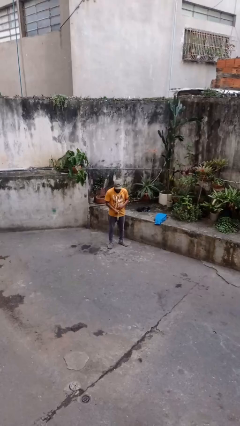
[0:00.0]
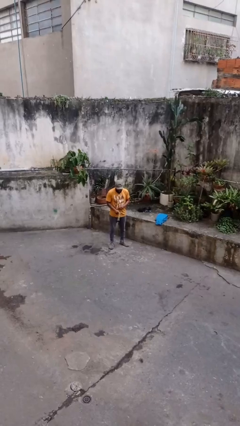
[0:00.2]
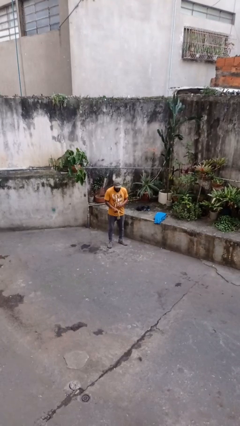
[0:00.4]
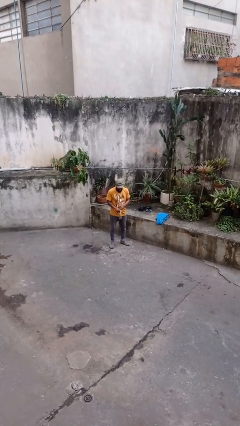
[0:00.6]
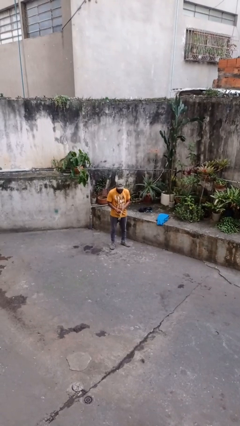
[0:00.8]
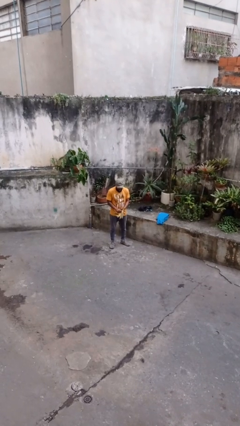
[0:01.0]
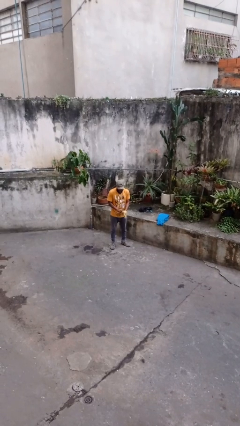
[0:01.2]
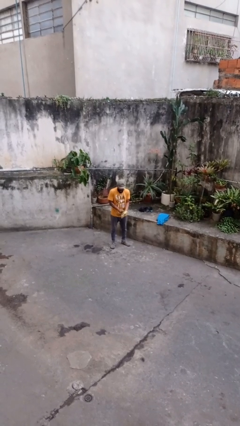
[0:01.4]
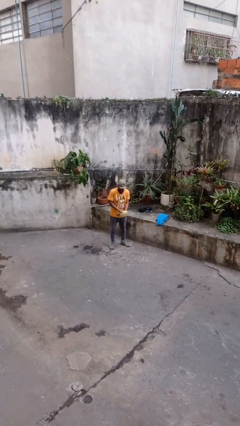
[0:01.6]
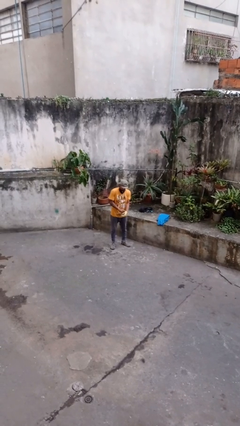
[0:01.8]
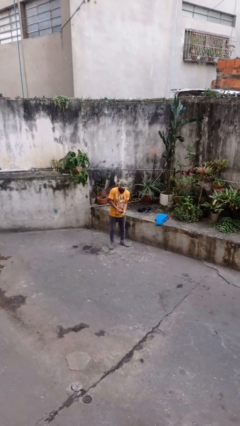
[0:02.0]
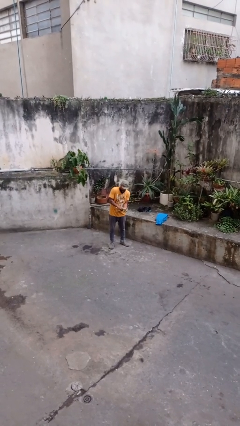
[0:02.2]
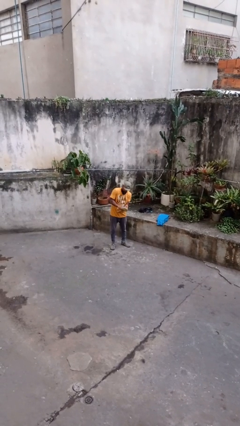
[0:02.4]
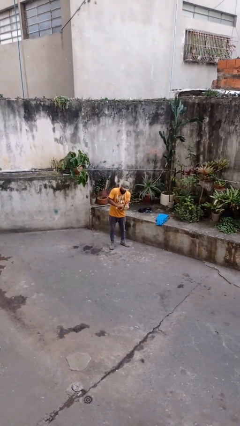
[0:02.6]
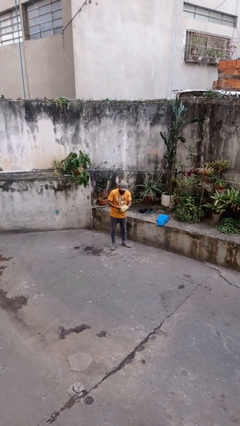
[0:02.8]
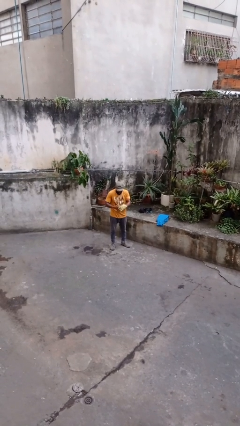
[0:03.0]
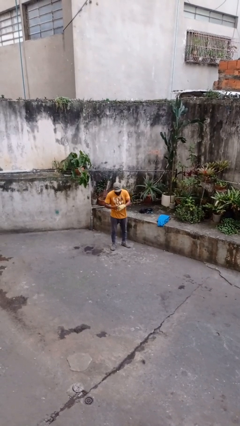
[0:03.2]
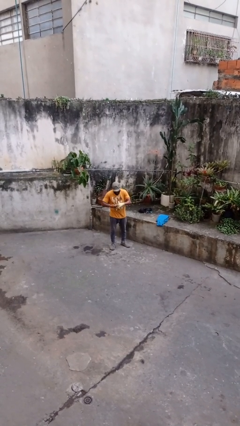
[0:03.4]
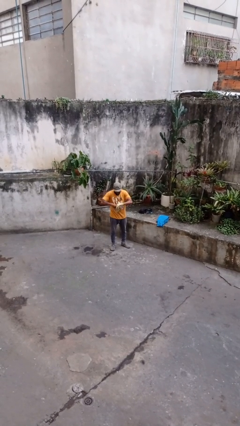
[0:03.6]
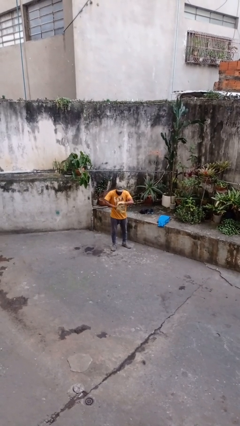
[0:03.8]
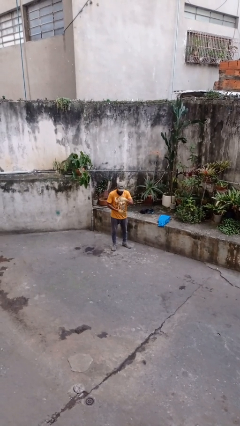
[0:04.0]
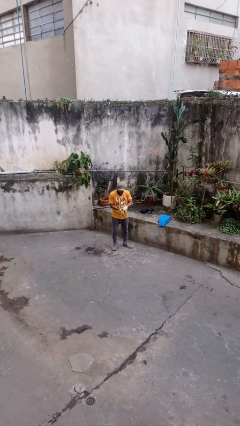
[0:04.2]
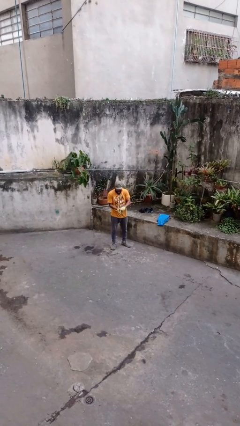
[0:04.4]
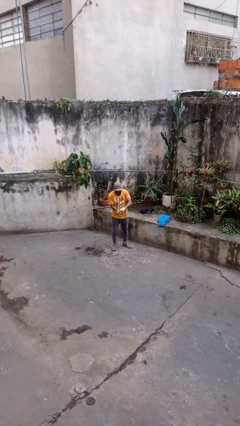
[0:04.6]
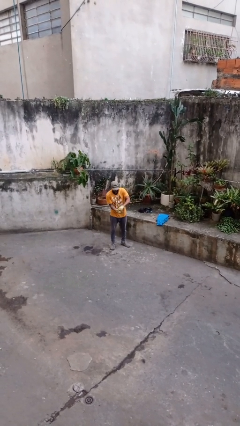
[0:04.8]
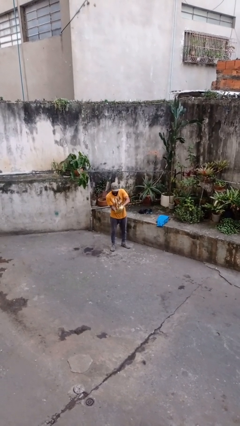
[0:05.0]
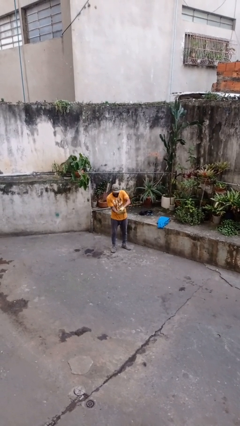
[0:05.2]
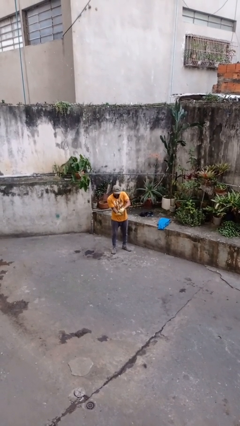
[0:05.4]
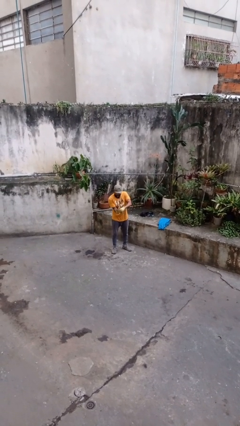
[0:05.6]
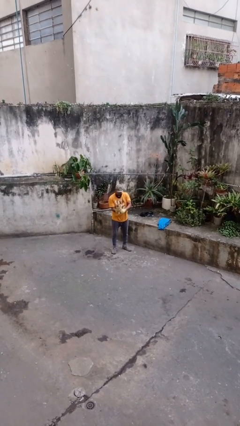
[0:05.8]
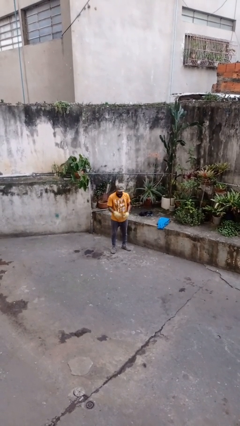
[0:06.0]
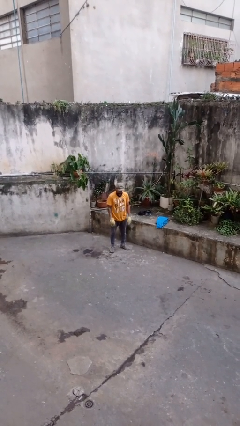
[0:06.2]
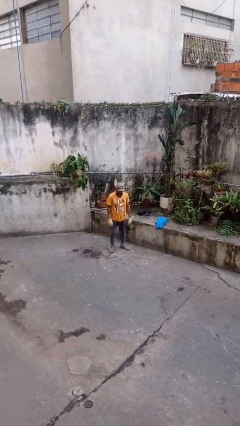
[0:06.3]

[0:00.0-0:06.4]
person puts on gloves

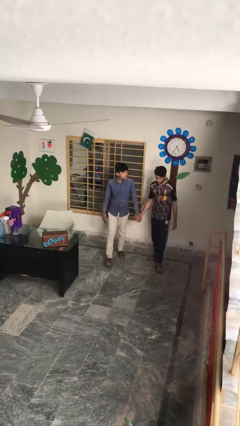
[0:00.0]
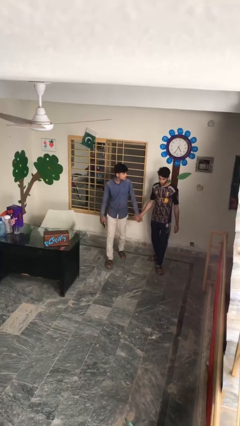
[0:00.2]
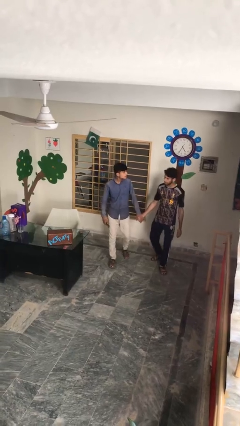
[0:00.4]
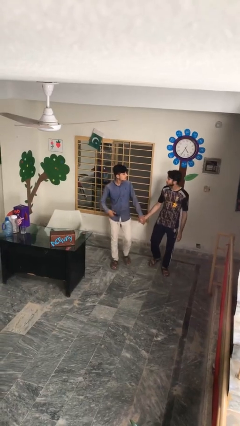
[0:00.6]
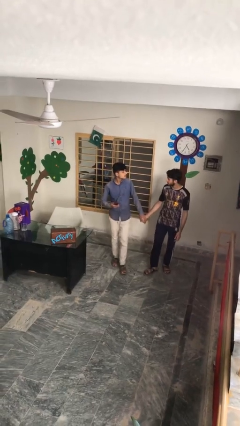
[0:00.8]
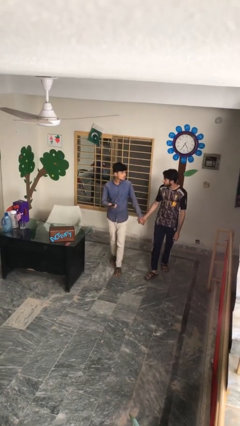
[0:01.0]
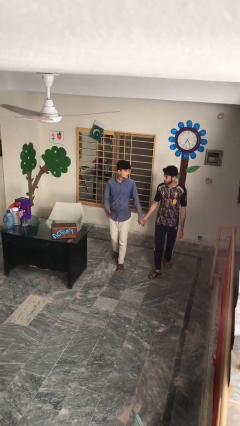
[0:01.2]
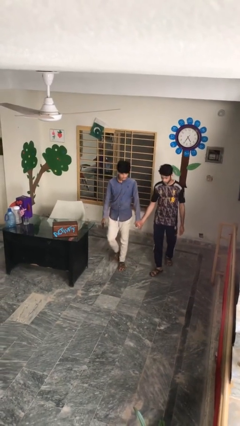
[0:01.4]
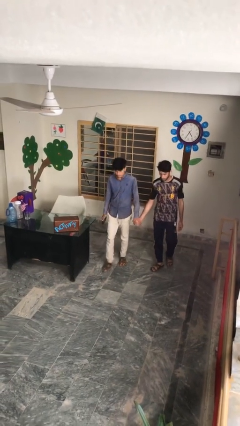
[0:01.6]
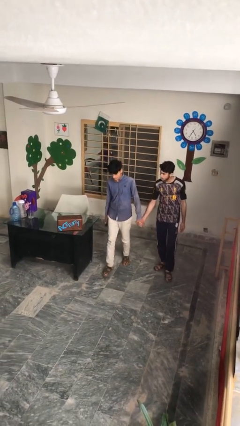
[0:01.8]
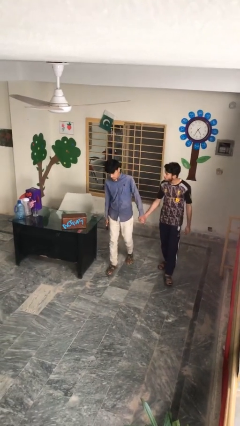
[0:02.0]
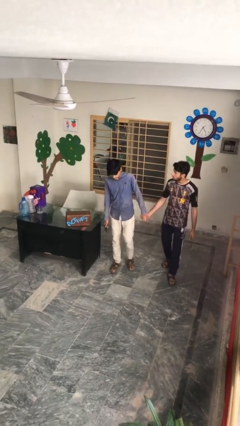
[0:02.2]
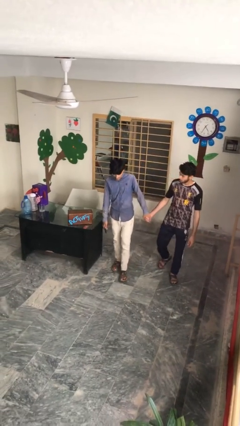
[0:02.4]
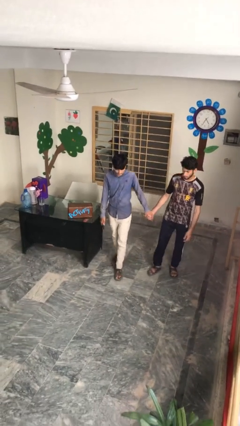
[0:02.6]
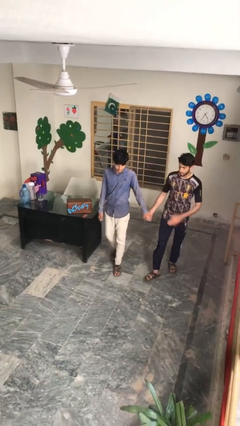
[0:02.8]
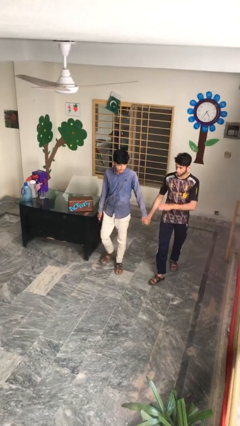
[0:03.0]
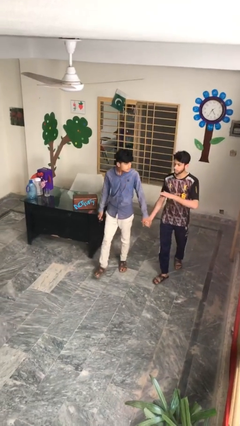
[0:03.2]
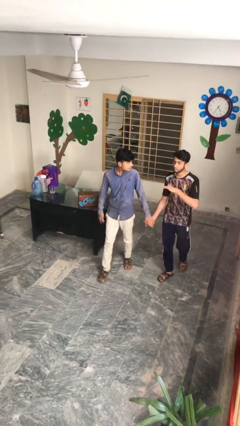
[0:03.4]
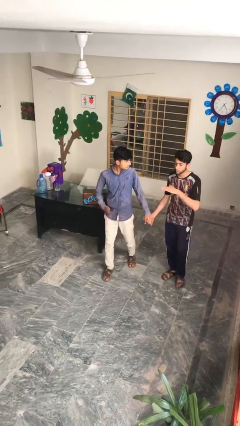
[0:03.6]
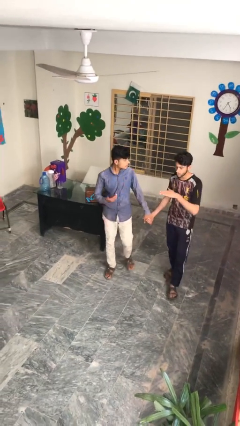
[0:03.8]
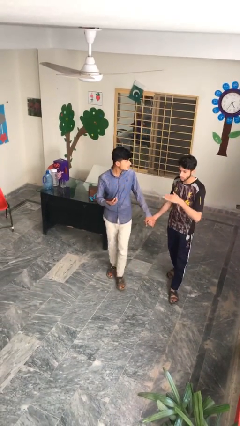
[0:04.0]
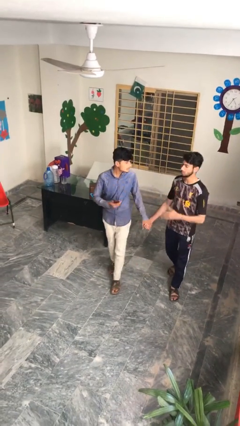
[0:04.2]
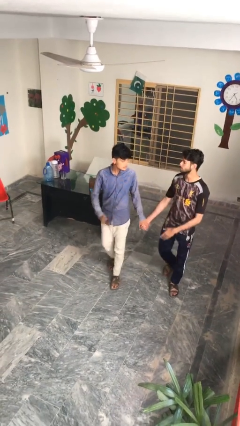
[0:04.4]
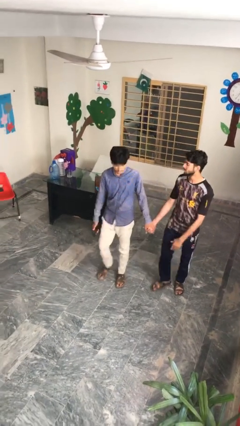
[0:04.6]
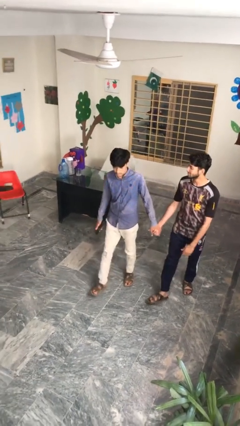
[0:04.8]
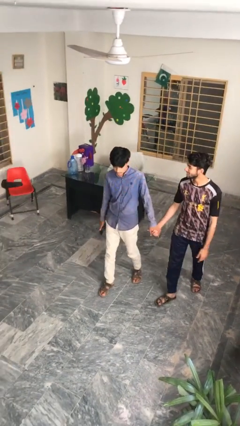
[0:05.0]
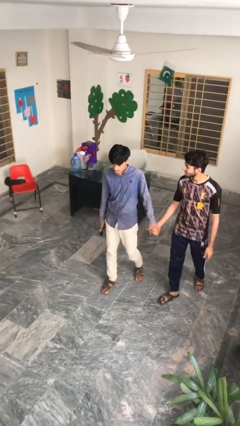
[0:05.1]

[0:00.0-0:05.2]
person holds hand

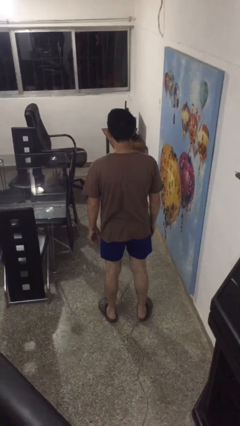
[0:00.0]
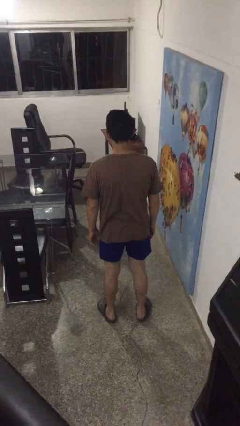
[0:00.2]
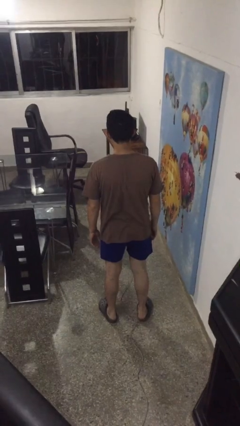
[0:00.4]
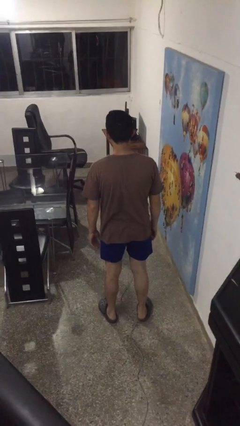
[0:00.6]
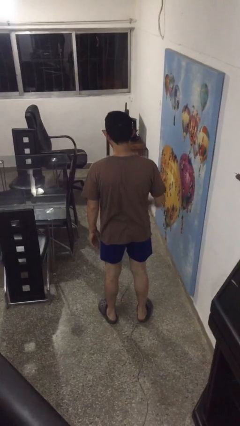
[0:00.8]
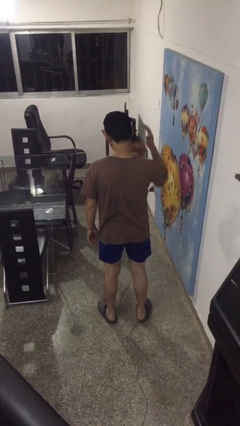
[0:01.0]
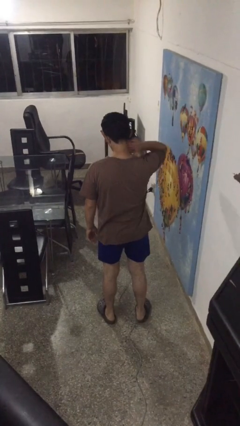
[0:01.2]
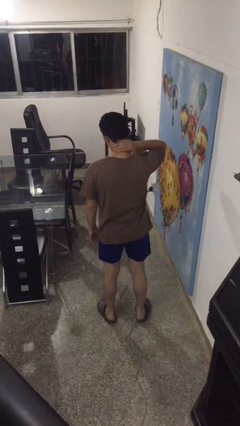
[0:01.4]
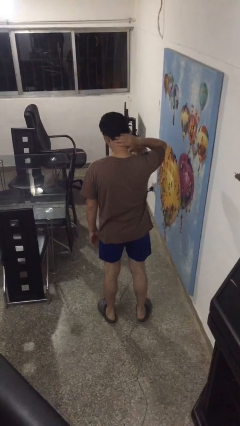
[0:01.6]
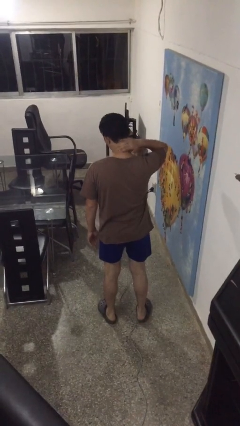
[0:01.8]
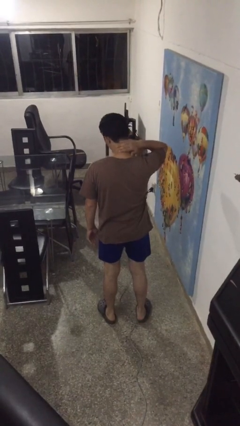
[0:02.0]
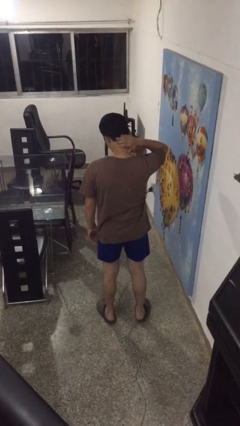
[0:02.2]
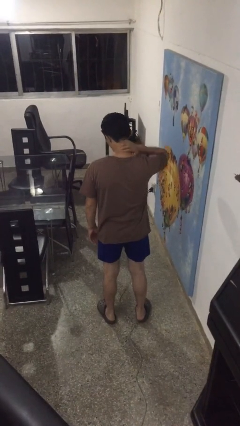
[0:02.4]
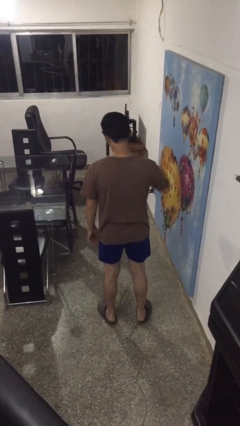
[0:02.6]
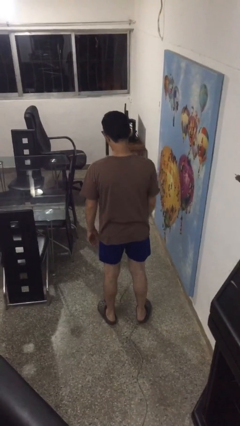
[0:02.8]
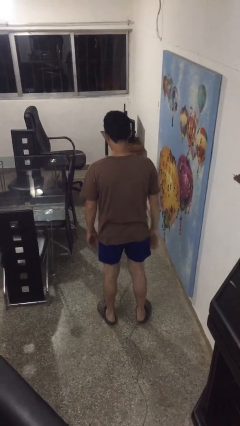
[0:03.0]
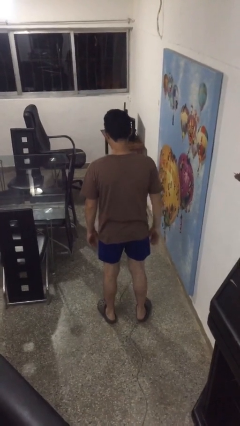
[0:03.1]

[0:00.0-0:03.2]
person swats bug

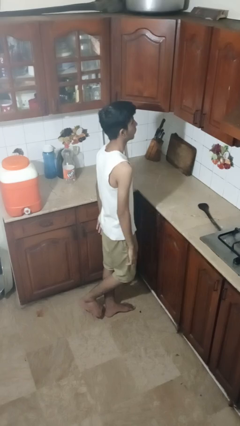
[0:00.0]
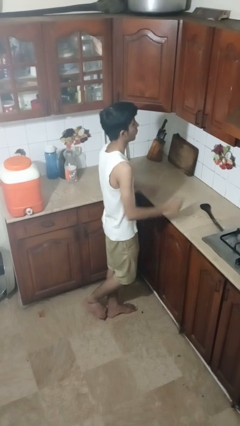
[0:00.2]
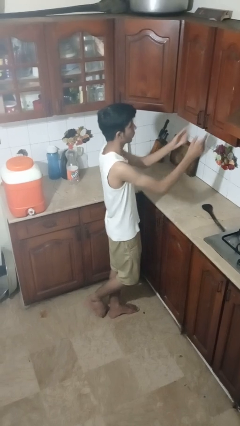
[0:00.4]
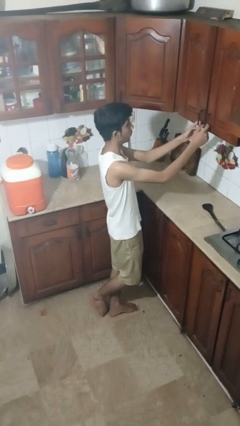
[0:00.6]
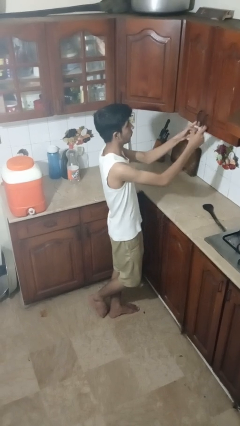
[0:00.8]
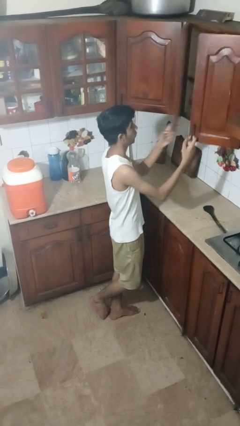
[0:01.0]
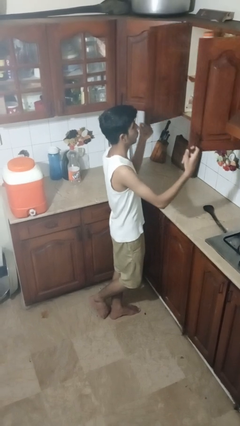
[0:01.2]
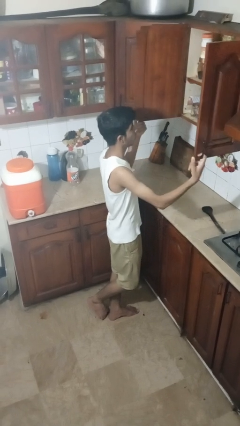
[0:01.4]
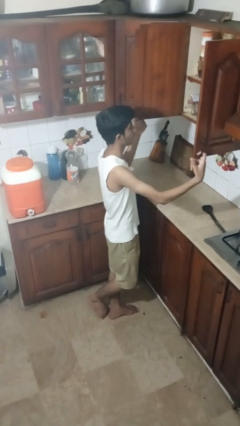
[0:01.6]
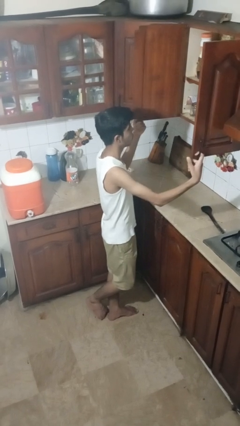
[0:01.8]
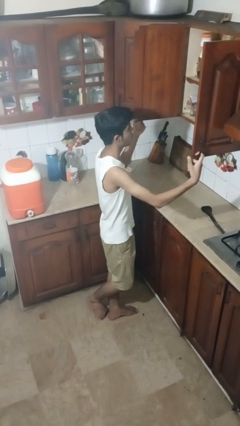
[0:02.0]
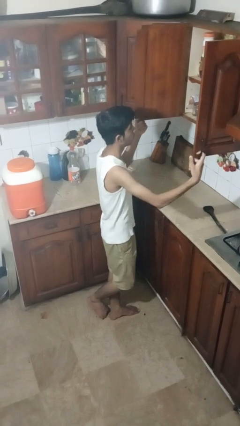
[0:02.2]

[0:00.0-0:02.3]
person opens cabinet

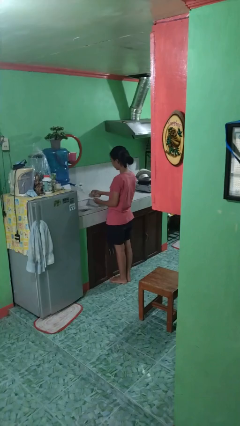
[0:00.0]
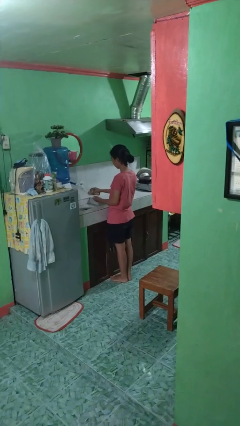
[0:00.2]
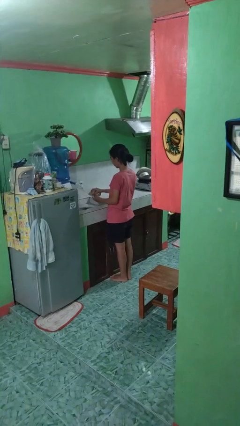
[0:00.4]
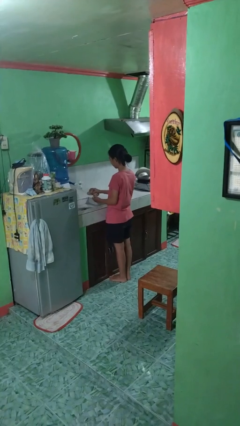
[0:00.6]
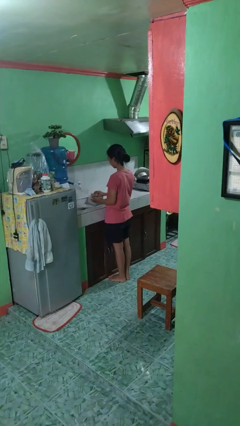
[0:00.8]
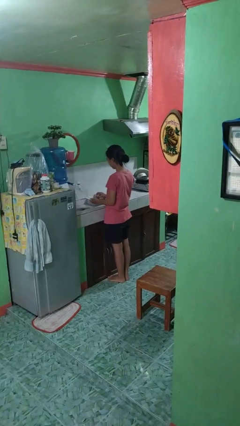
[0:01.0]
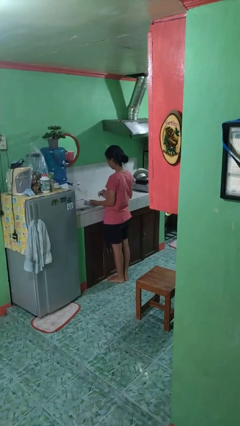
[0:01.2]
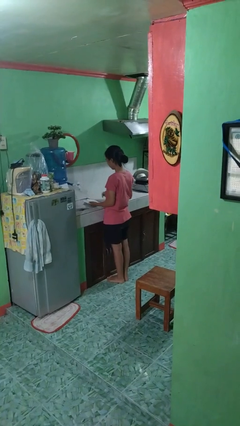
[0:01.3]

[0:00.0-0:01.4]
person dries dish
